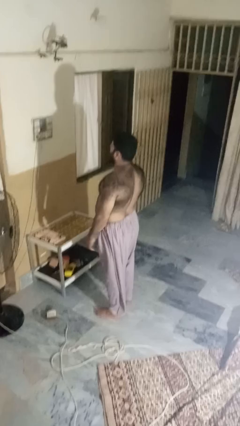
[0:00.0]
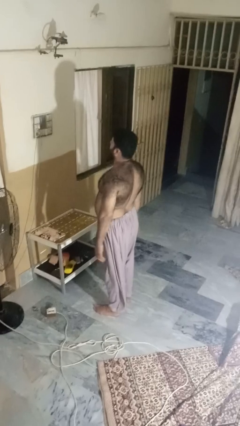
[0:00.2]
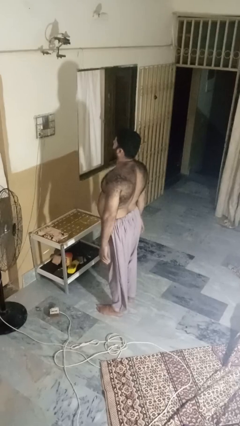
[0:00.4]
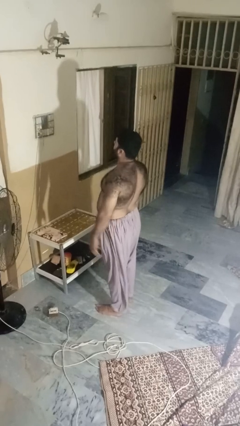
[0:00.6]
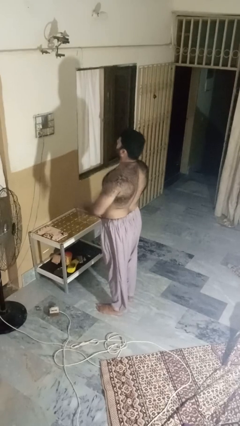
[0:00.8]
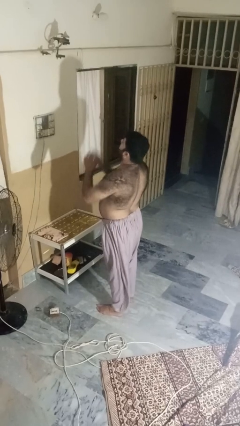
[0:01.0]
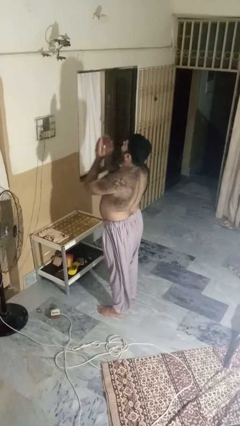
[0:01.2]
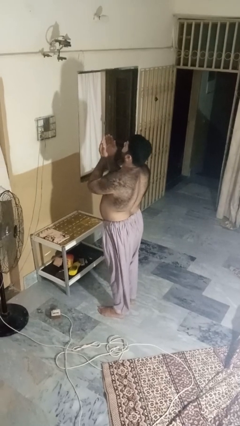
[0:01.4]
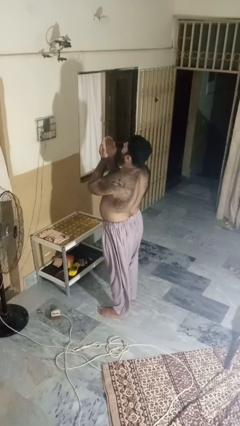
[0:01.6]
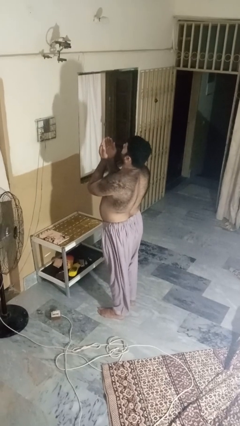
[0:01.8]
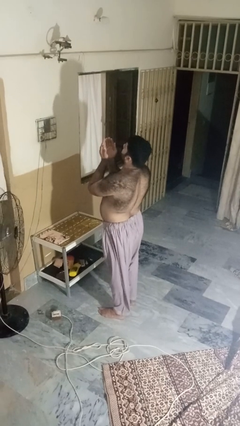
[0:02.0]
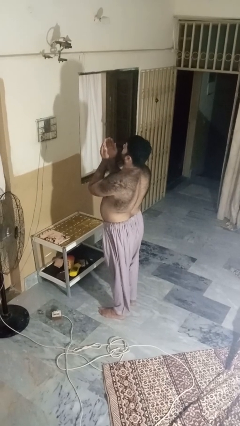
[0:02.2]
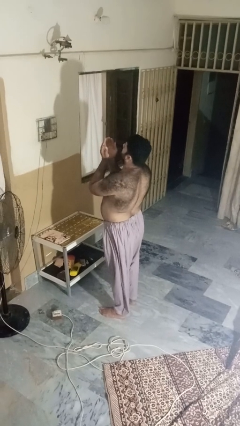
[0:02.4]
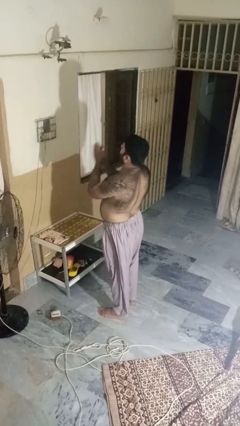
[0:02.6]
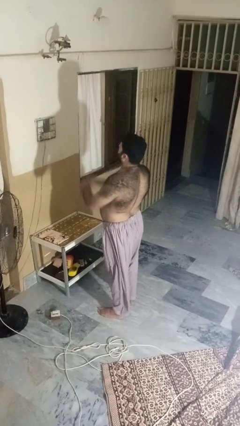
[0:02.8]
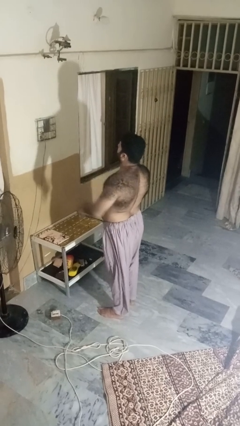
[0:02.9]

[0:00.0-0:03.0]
person prays

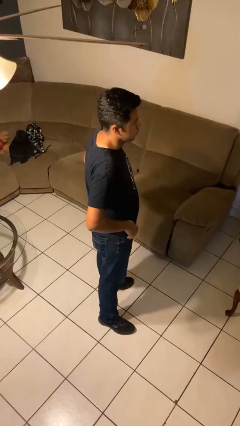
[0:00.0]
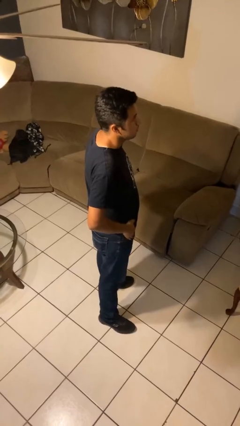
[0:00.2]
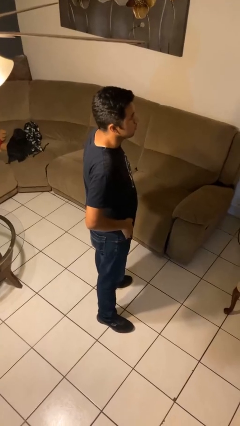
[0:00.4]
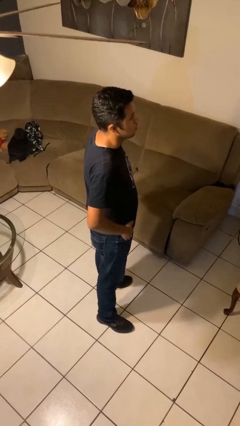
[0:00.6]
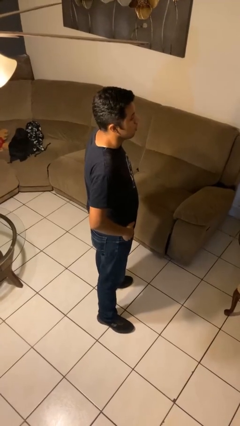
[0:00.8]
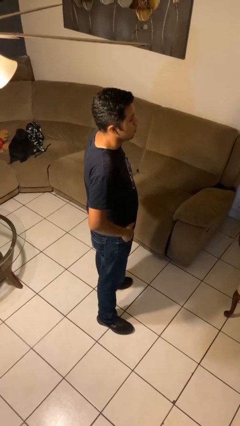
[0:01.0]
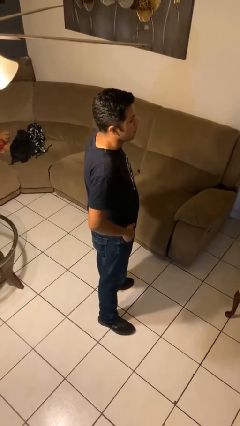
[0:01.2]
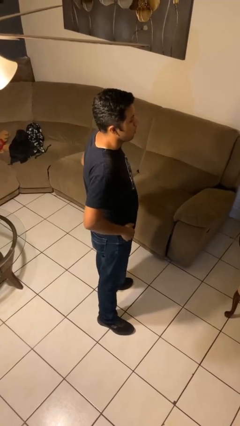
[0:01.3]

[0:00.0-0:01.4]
person puts hands in back pockets

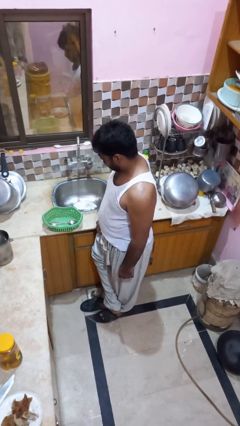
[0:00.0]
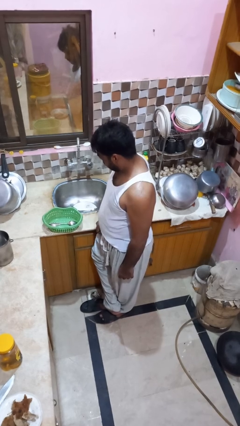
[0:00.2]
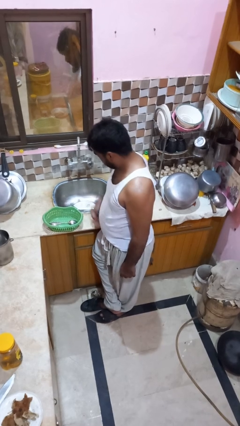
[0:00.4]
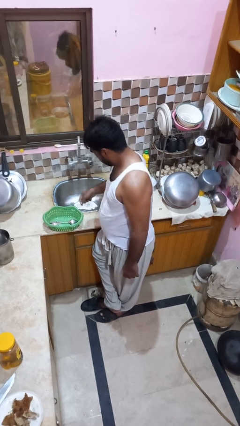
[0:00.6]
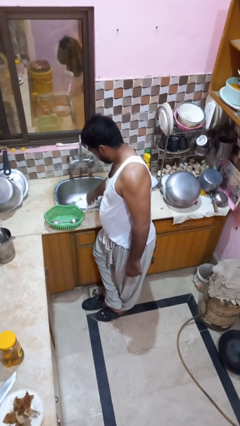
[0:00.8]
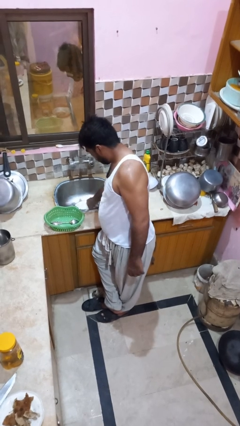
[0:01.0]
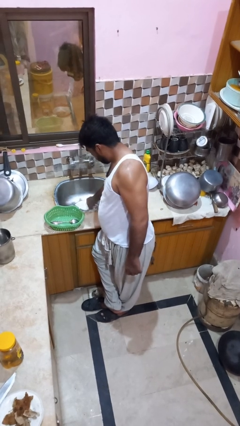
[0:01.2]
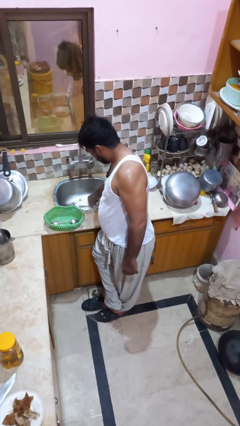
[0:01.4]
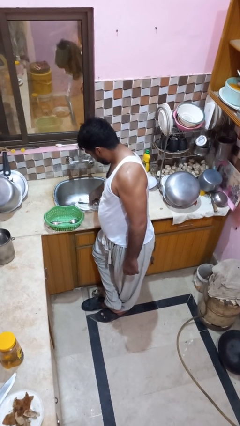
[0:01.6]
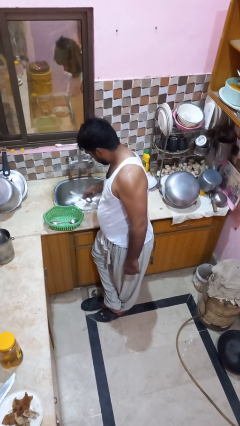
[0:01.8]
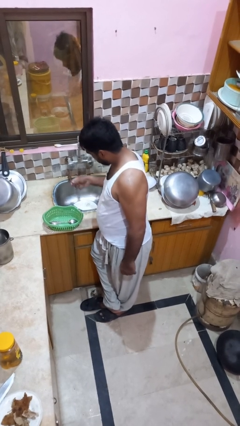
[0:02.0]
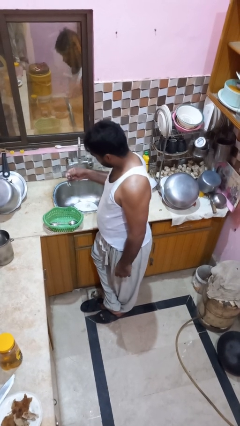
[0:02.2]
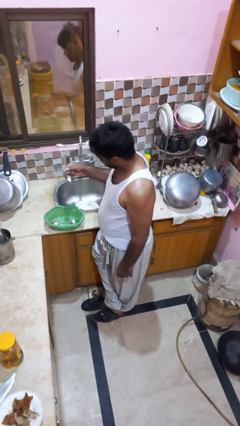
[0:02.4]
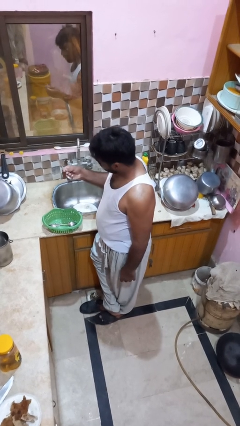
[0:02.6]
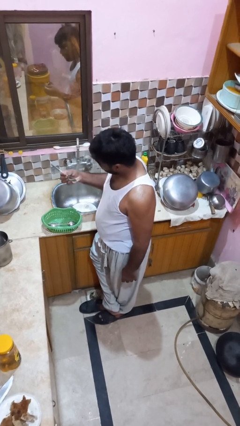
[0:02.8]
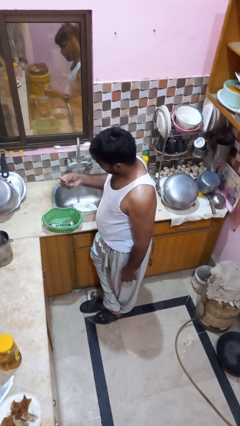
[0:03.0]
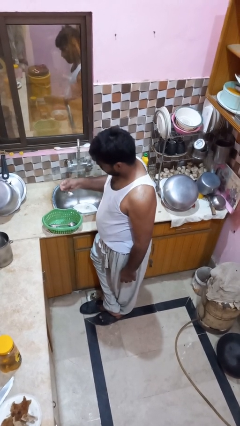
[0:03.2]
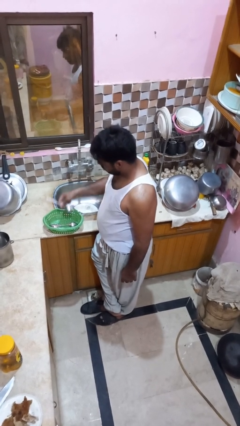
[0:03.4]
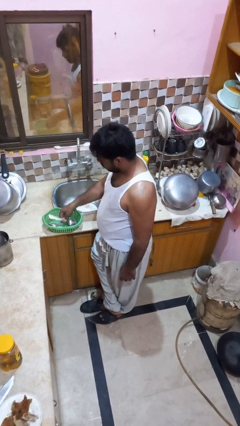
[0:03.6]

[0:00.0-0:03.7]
person loads dishwasher

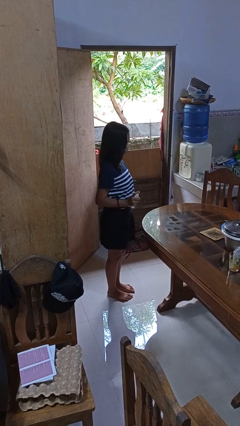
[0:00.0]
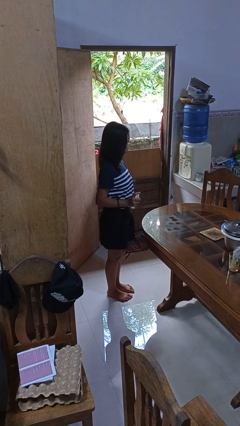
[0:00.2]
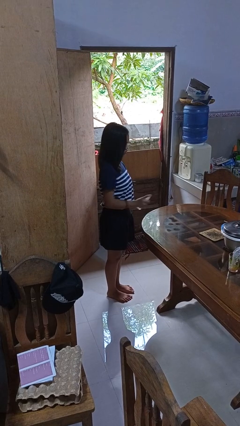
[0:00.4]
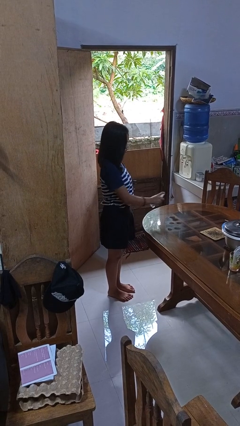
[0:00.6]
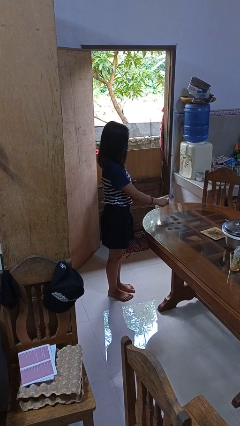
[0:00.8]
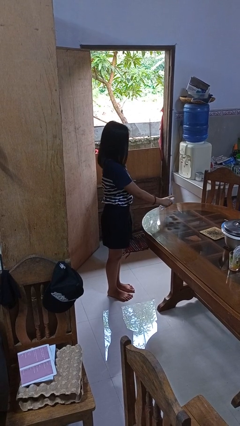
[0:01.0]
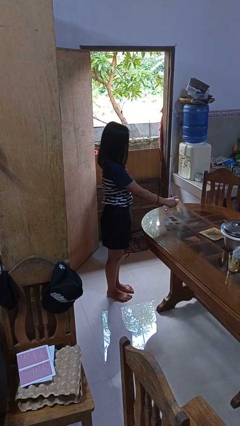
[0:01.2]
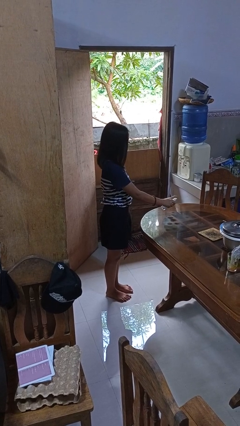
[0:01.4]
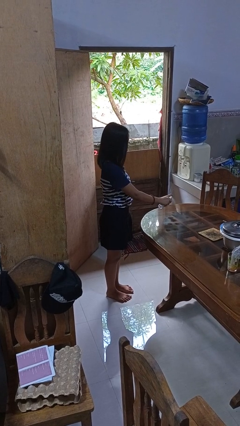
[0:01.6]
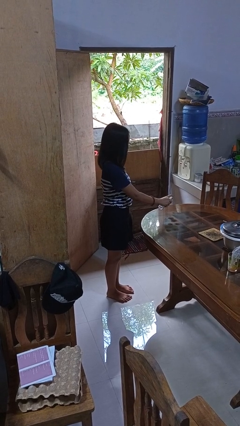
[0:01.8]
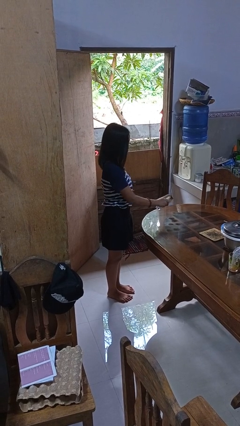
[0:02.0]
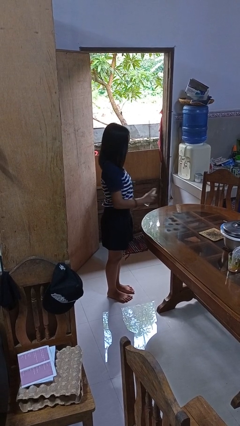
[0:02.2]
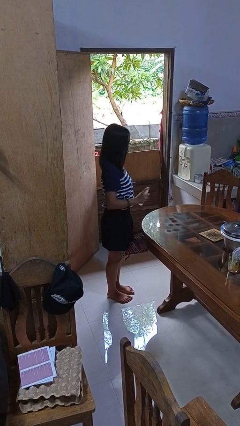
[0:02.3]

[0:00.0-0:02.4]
person sprays from bottle

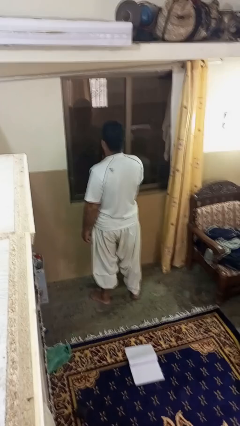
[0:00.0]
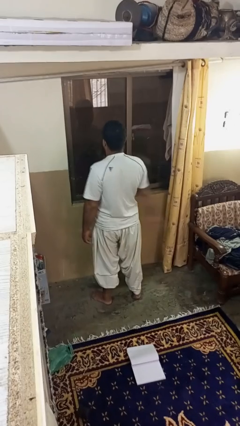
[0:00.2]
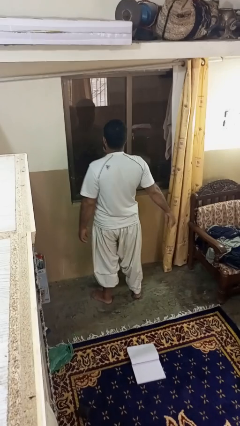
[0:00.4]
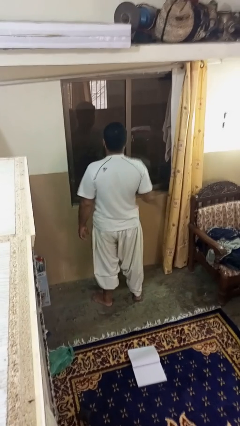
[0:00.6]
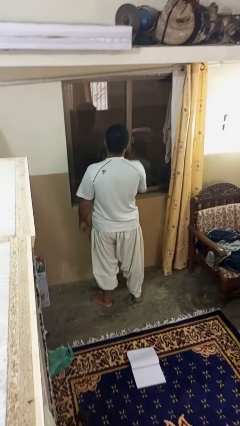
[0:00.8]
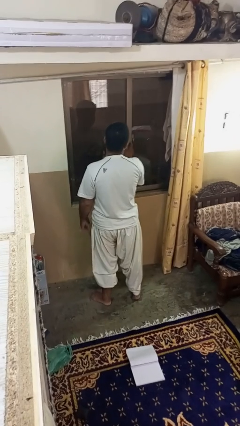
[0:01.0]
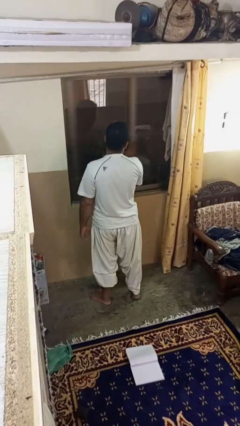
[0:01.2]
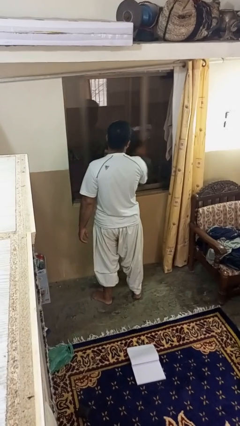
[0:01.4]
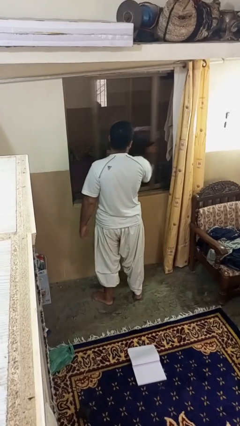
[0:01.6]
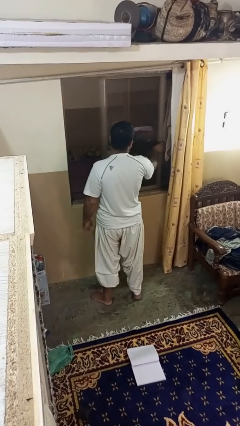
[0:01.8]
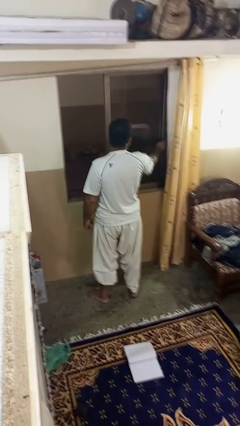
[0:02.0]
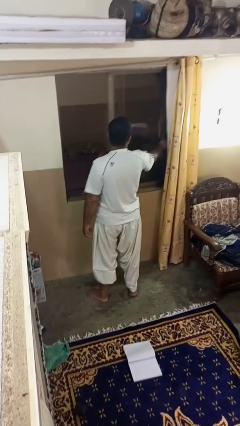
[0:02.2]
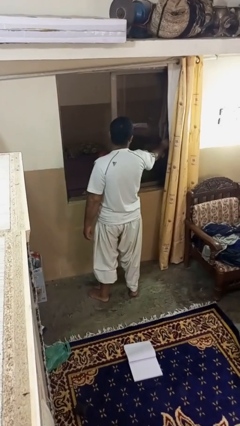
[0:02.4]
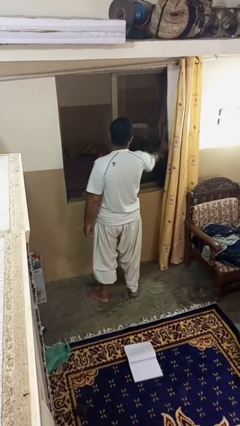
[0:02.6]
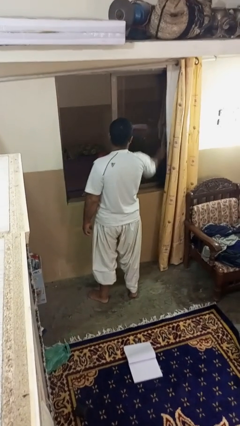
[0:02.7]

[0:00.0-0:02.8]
person opens home window

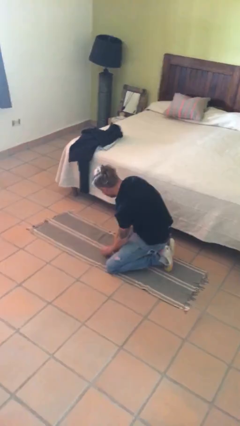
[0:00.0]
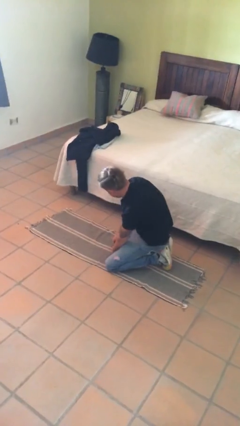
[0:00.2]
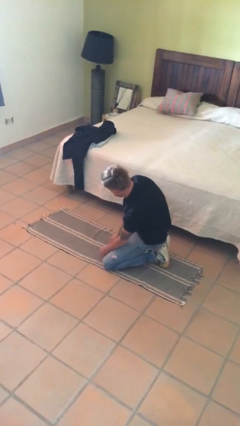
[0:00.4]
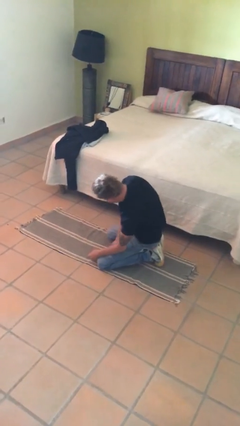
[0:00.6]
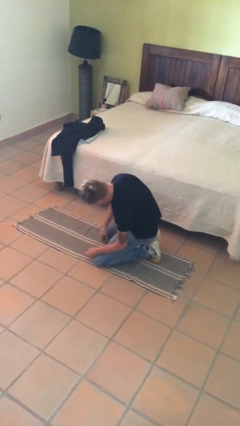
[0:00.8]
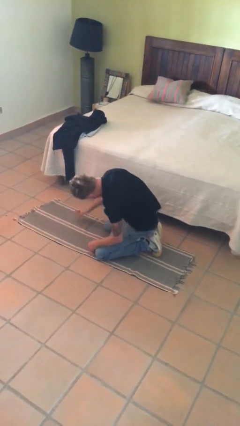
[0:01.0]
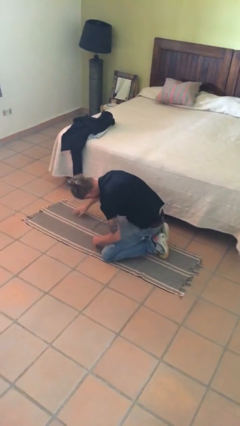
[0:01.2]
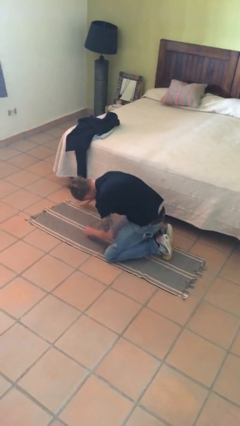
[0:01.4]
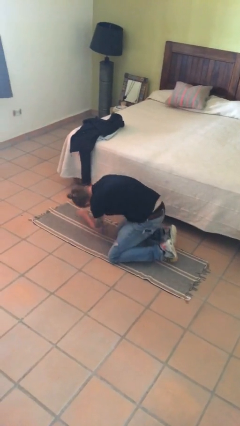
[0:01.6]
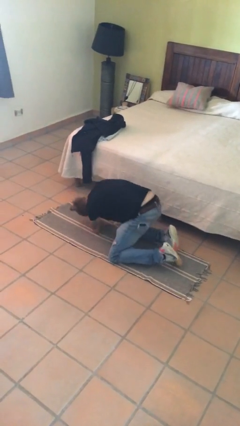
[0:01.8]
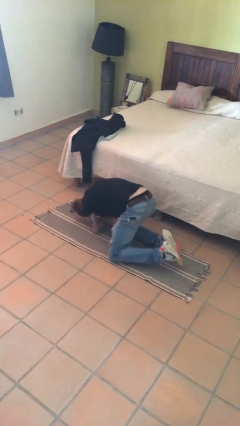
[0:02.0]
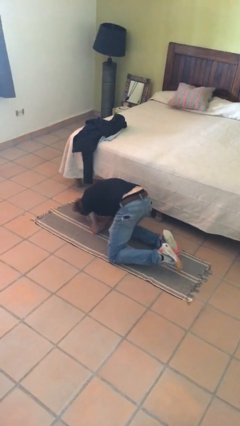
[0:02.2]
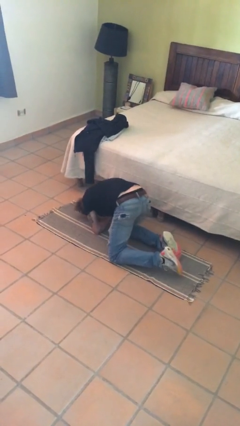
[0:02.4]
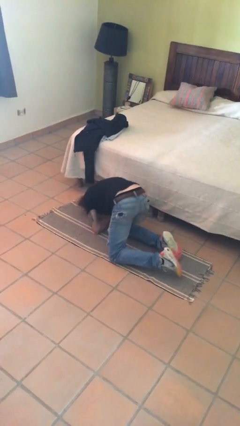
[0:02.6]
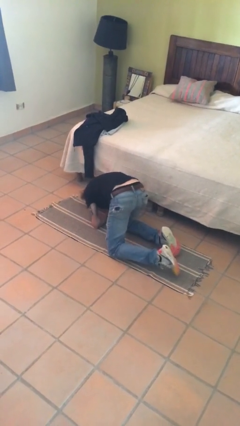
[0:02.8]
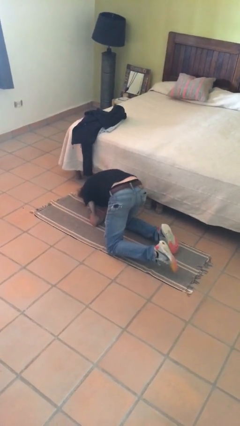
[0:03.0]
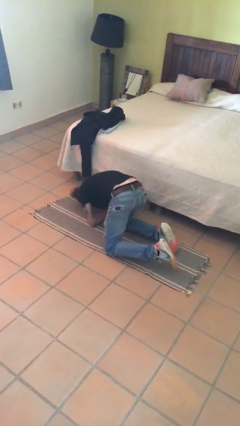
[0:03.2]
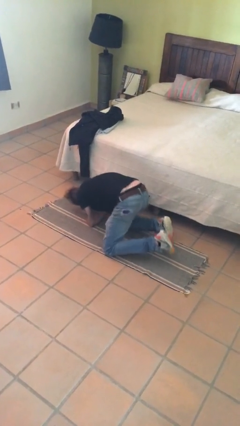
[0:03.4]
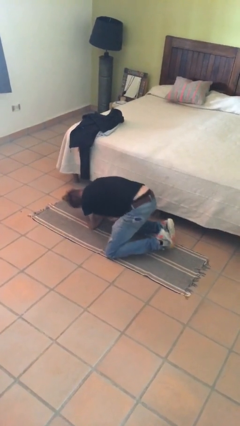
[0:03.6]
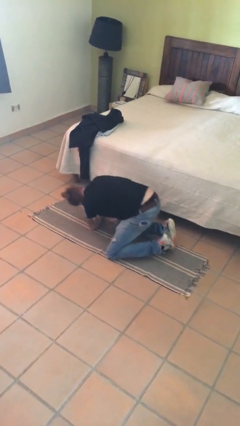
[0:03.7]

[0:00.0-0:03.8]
person searches under bed

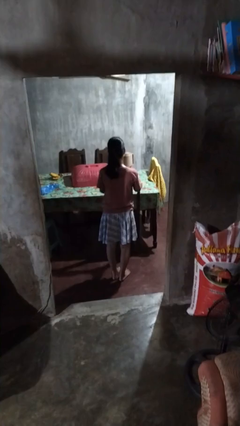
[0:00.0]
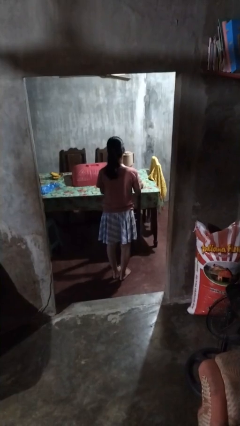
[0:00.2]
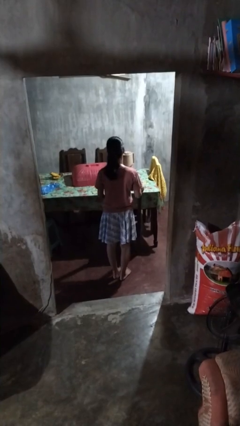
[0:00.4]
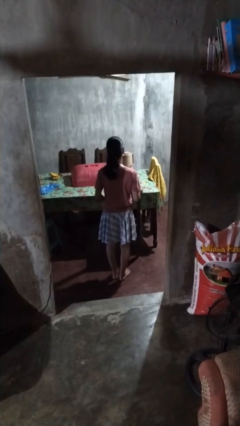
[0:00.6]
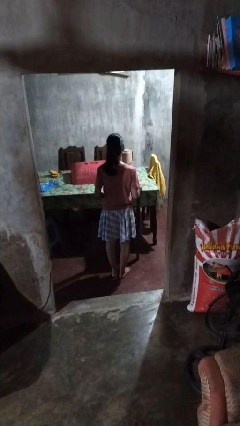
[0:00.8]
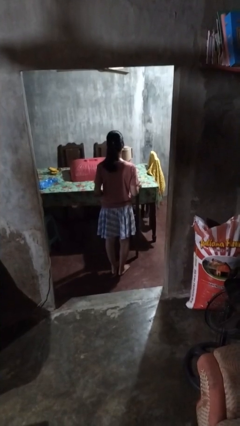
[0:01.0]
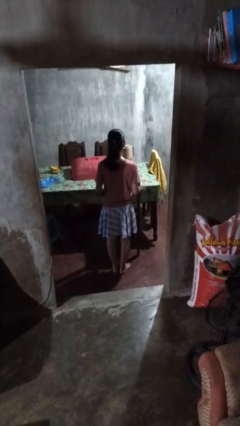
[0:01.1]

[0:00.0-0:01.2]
person pulls out chair
